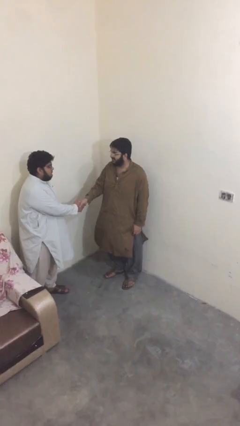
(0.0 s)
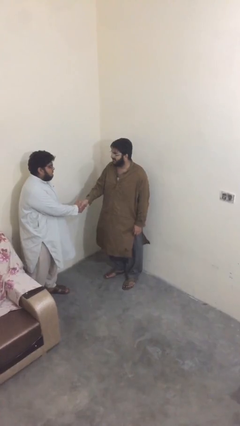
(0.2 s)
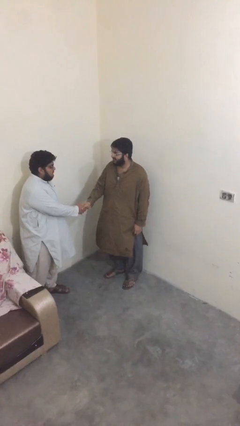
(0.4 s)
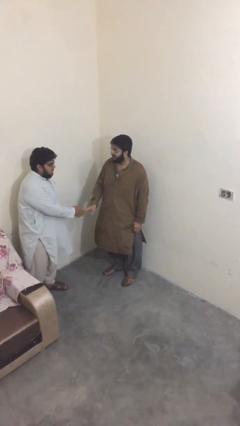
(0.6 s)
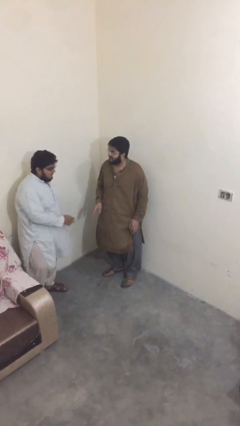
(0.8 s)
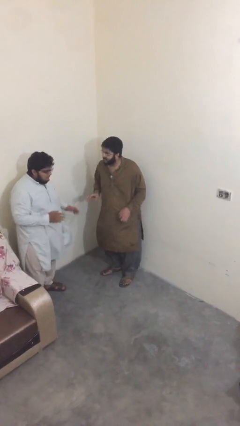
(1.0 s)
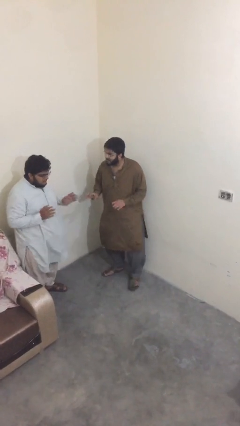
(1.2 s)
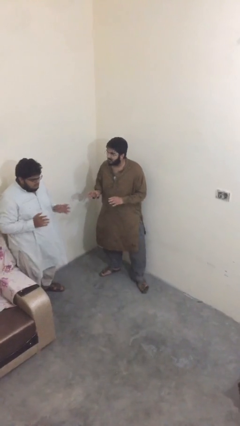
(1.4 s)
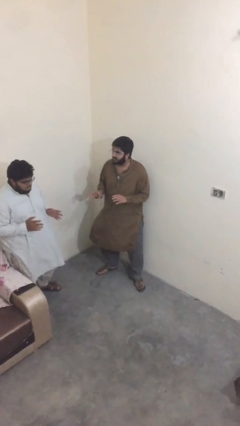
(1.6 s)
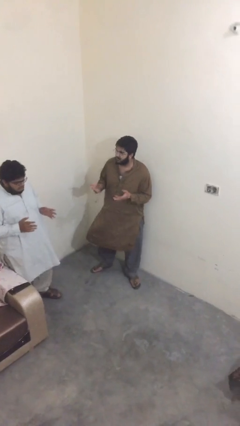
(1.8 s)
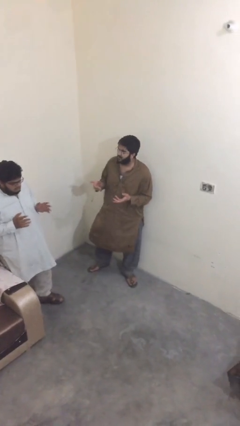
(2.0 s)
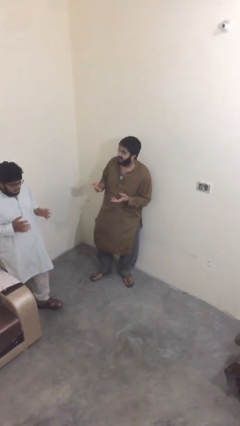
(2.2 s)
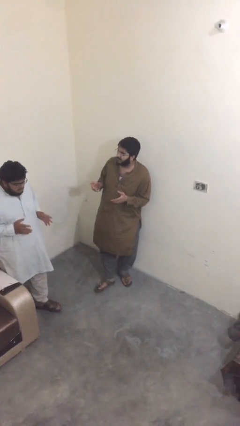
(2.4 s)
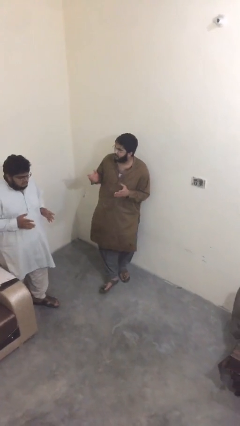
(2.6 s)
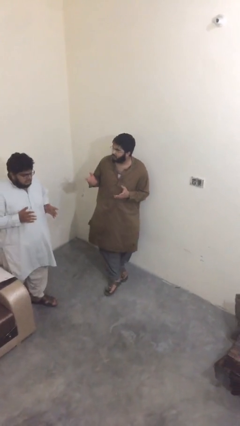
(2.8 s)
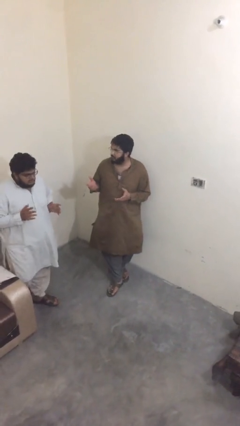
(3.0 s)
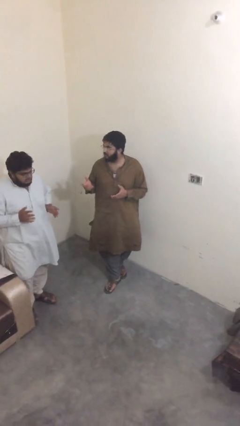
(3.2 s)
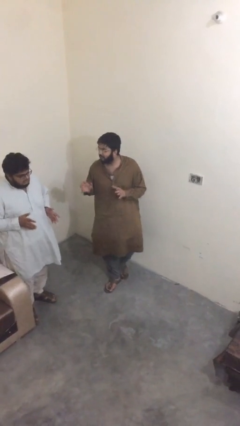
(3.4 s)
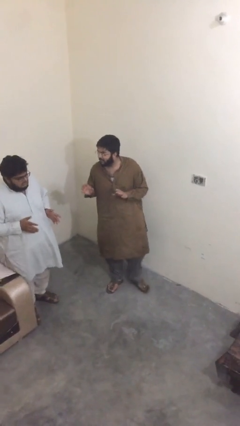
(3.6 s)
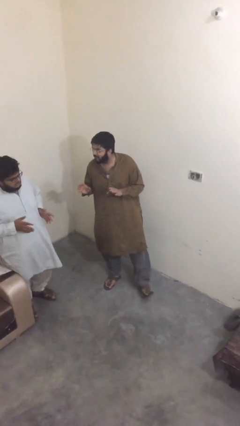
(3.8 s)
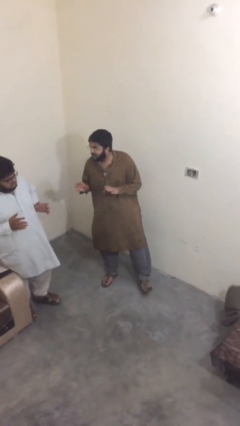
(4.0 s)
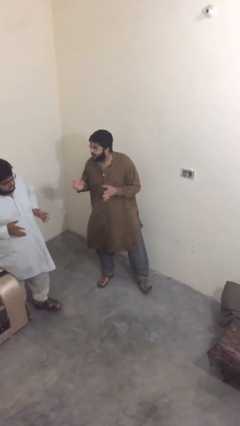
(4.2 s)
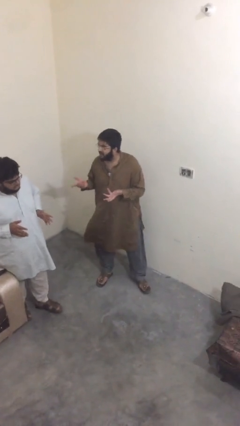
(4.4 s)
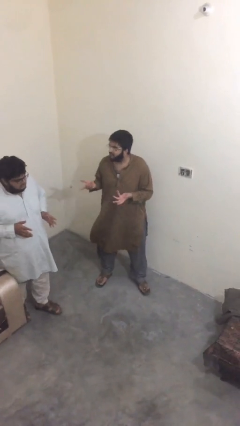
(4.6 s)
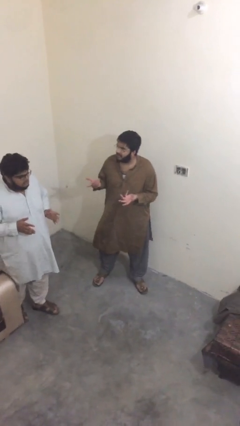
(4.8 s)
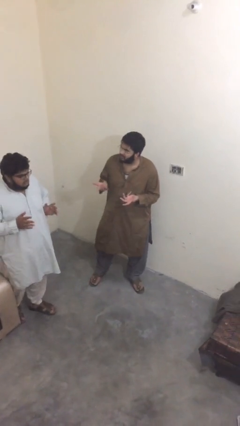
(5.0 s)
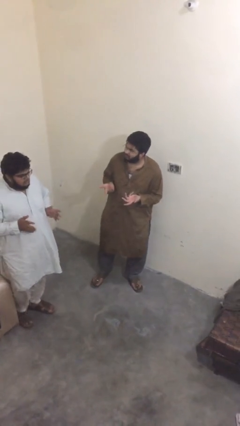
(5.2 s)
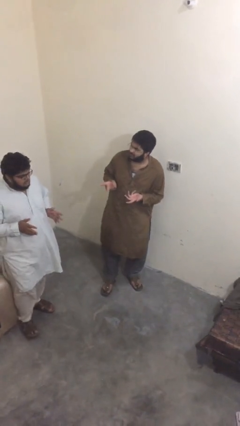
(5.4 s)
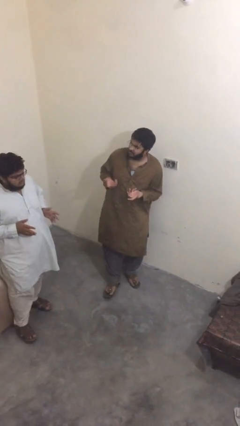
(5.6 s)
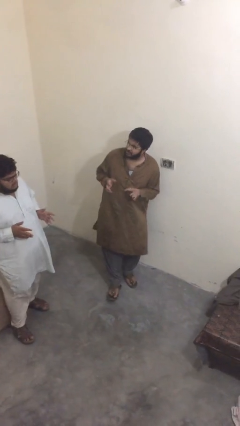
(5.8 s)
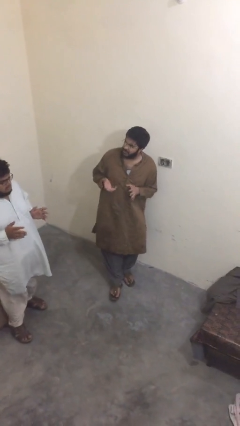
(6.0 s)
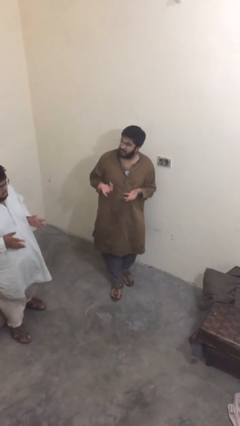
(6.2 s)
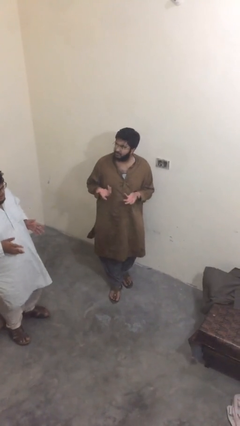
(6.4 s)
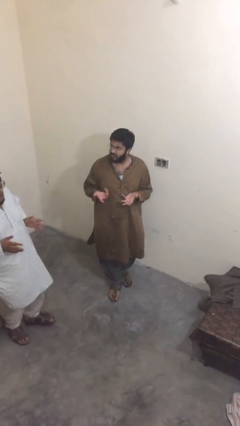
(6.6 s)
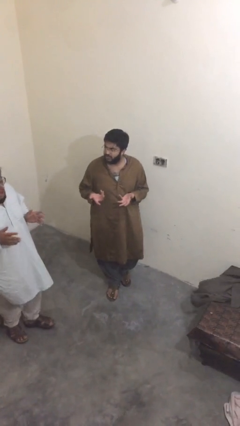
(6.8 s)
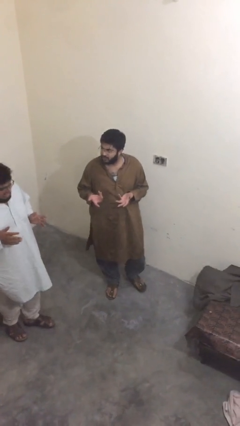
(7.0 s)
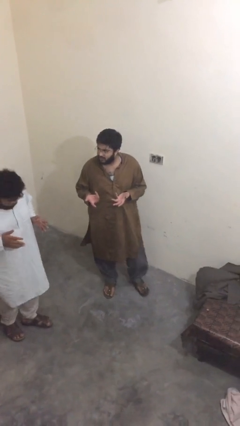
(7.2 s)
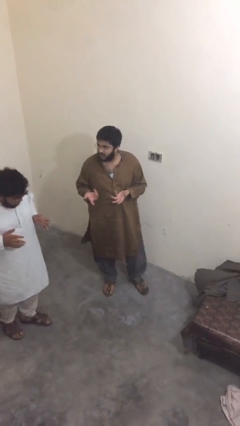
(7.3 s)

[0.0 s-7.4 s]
person talks to person

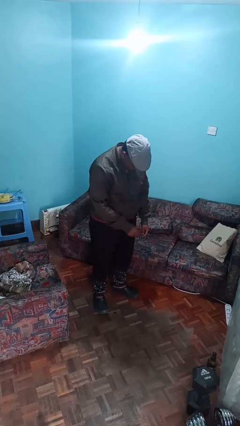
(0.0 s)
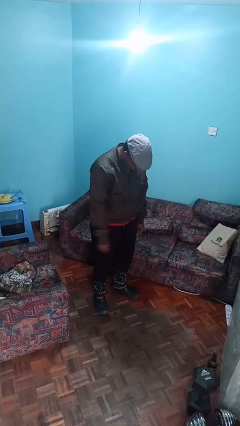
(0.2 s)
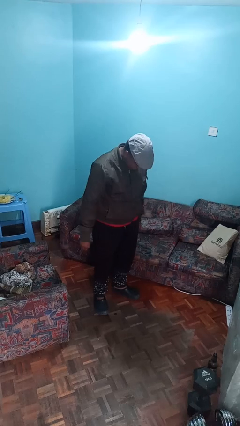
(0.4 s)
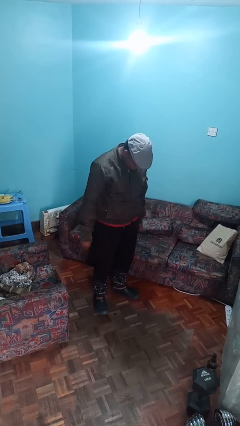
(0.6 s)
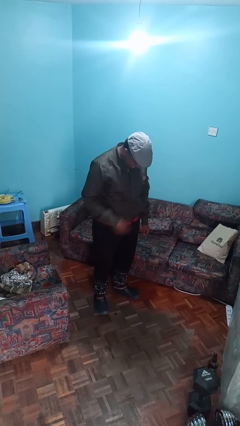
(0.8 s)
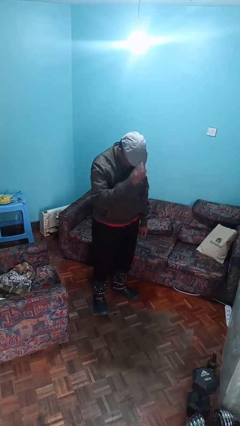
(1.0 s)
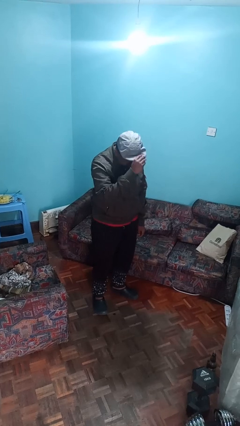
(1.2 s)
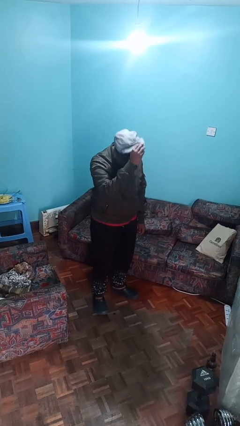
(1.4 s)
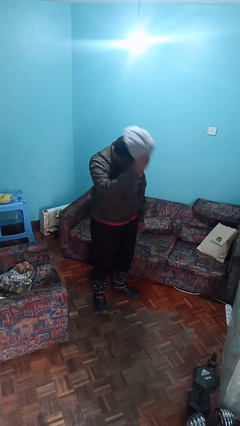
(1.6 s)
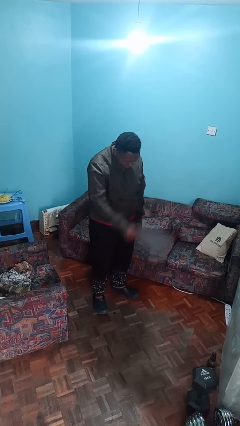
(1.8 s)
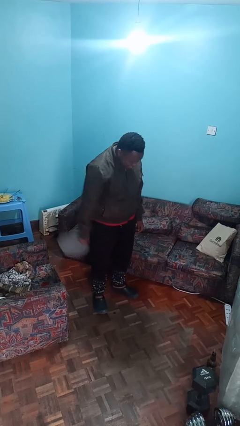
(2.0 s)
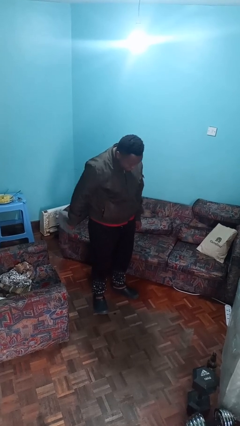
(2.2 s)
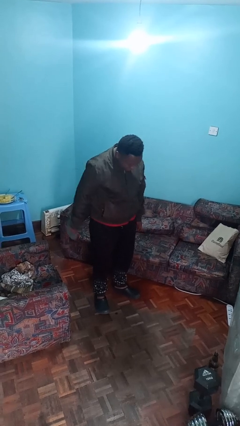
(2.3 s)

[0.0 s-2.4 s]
person takes off hat

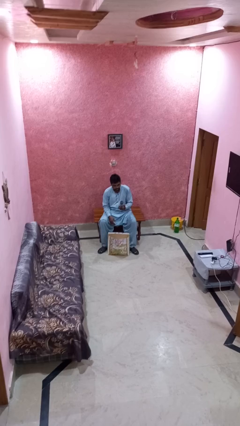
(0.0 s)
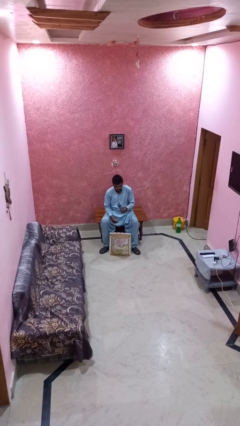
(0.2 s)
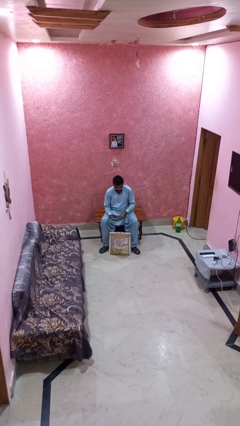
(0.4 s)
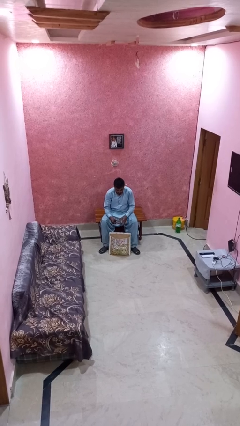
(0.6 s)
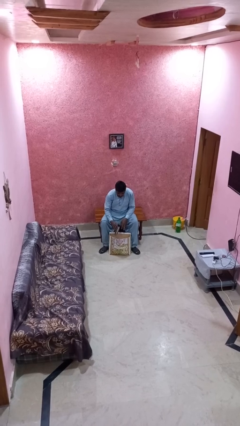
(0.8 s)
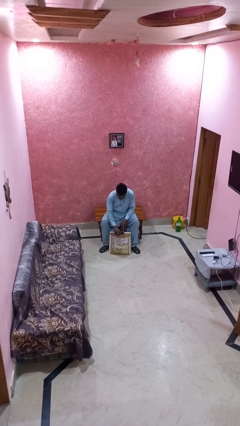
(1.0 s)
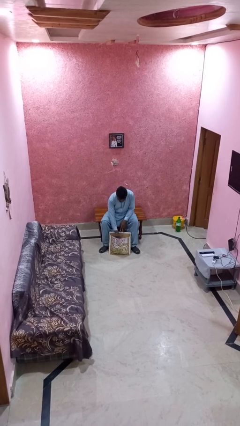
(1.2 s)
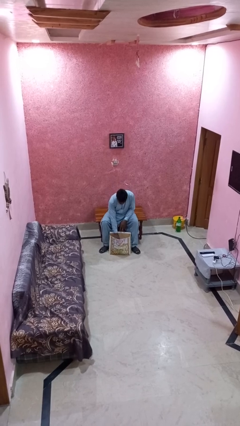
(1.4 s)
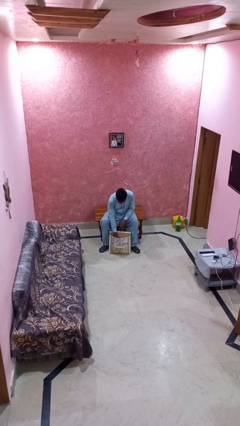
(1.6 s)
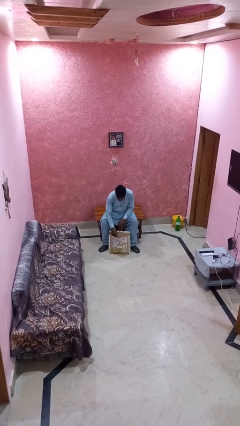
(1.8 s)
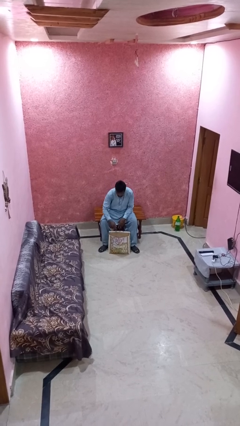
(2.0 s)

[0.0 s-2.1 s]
person puts object into bag

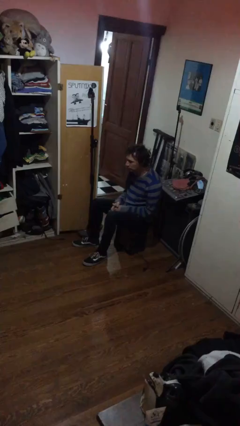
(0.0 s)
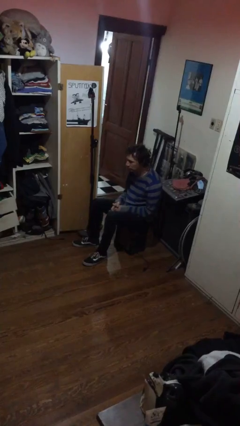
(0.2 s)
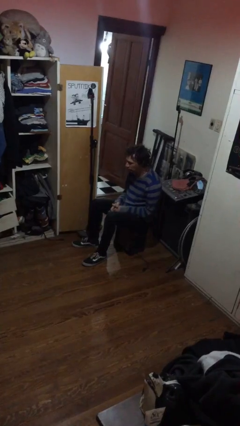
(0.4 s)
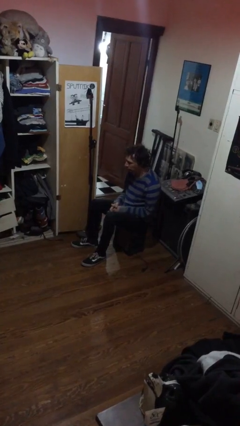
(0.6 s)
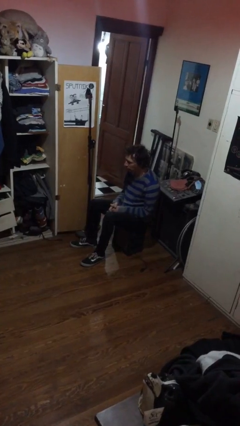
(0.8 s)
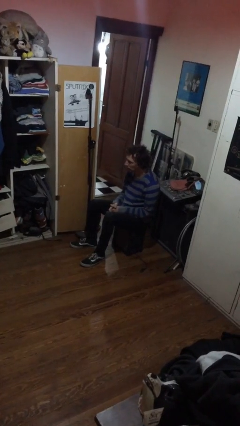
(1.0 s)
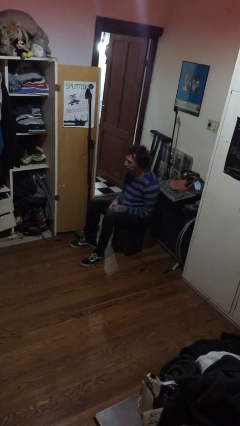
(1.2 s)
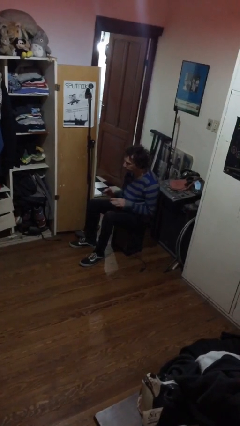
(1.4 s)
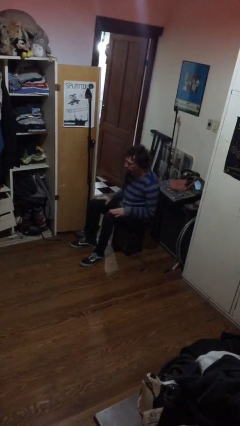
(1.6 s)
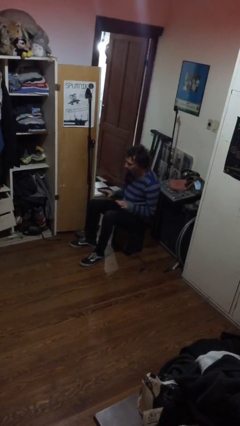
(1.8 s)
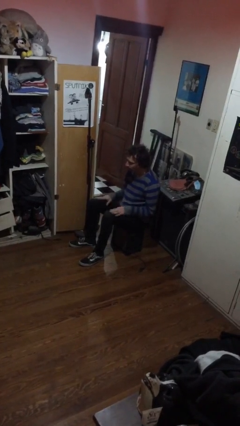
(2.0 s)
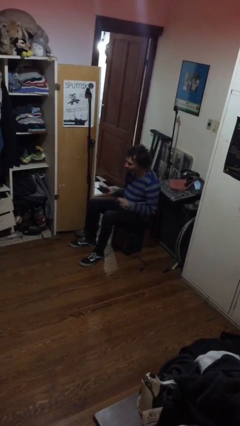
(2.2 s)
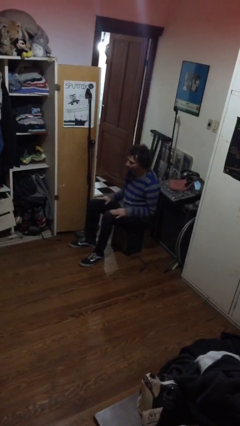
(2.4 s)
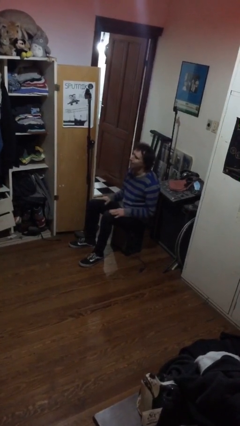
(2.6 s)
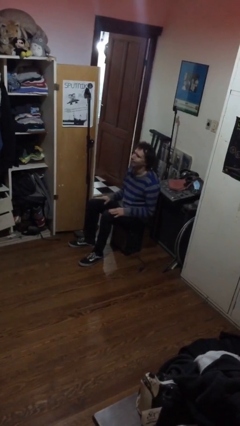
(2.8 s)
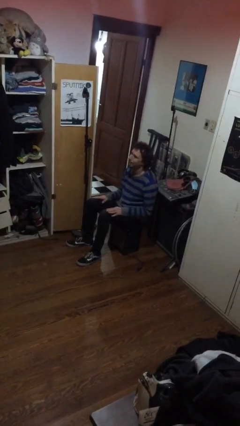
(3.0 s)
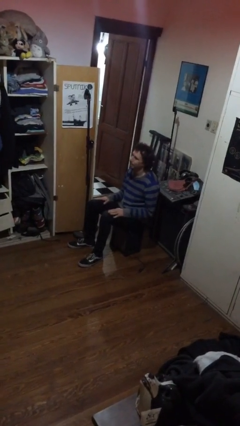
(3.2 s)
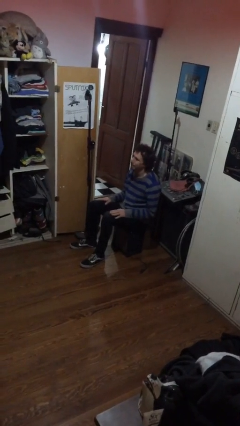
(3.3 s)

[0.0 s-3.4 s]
person slaps hands on thighs

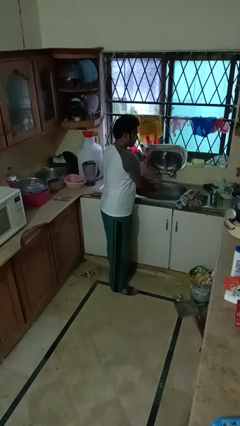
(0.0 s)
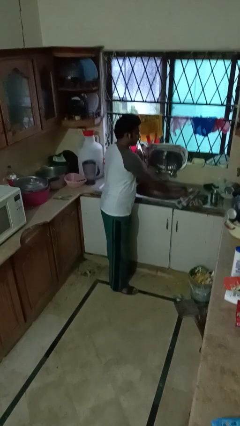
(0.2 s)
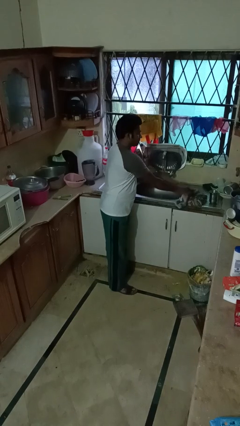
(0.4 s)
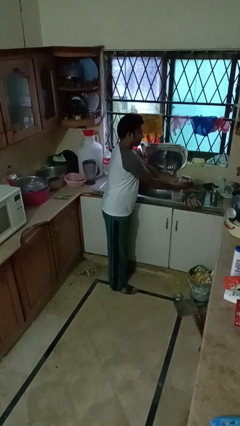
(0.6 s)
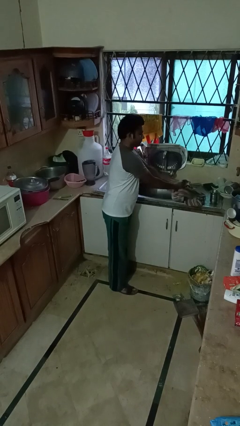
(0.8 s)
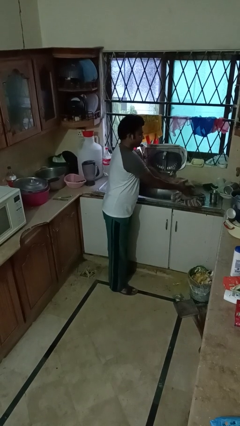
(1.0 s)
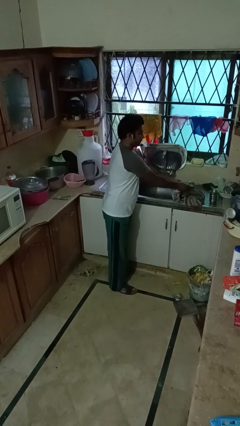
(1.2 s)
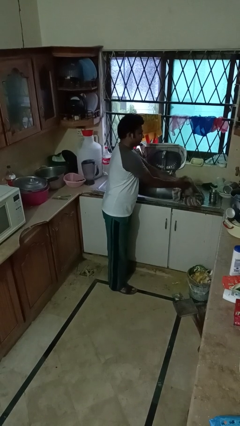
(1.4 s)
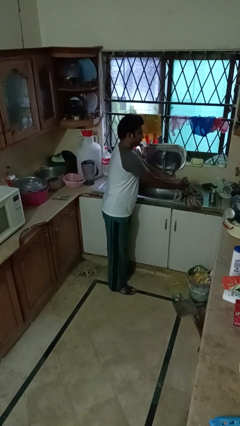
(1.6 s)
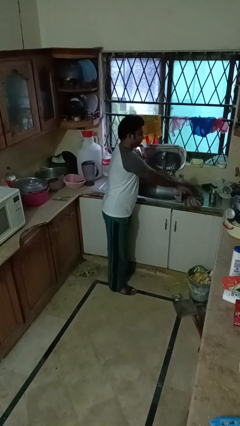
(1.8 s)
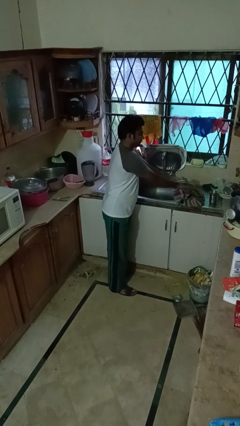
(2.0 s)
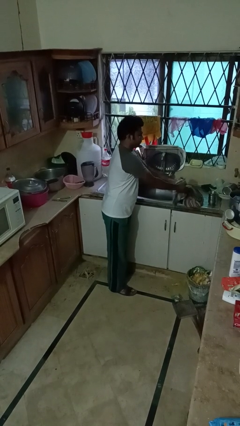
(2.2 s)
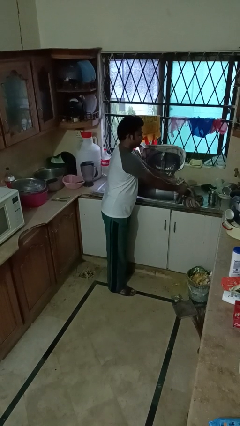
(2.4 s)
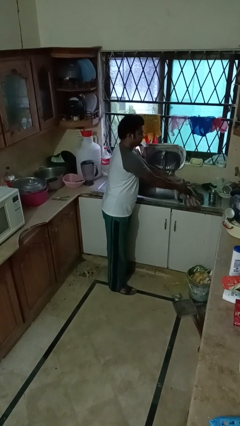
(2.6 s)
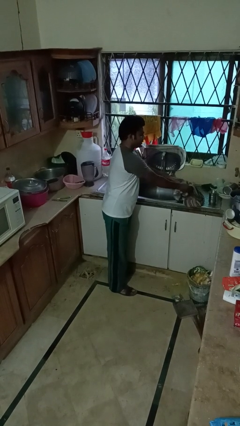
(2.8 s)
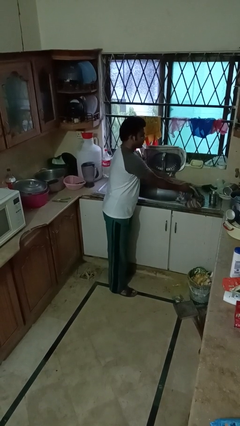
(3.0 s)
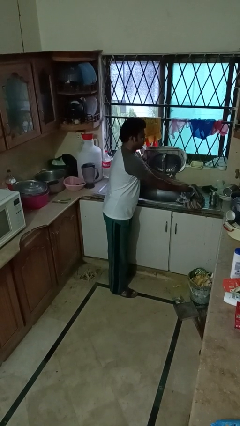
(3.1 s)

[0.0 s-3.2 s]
person dries hands with towel
